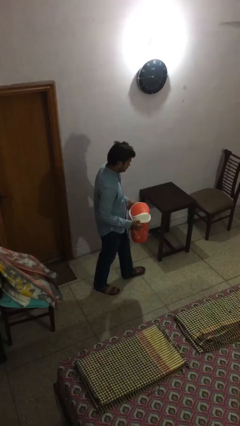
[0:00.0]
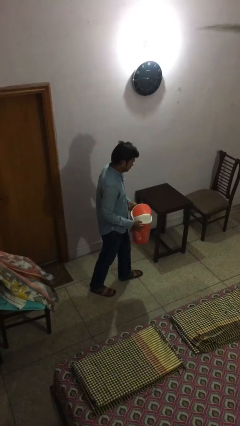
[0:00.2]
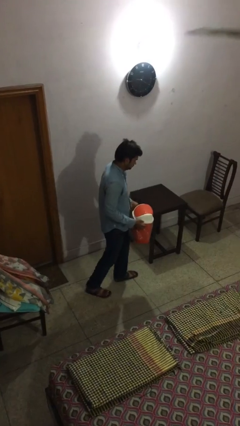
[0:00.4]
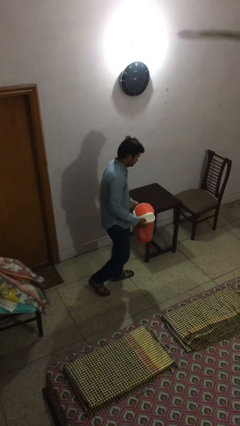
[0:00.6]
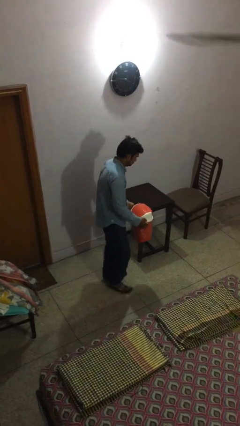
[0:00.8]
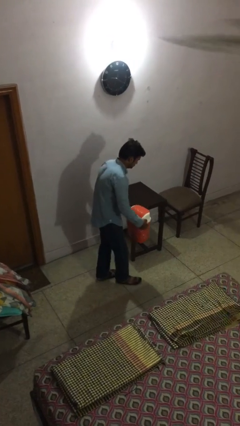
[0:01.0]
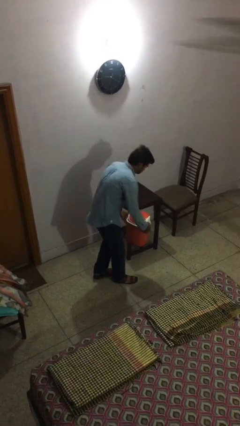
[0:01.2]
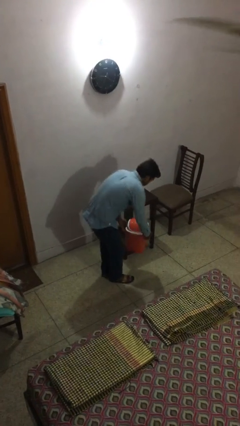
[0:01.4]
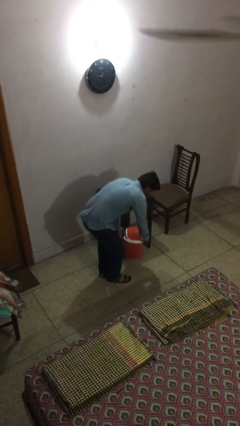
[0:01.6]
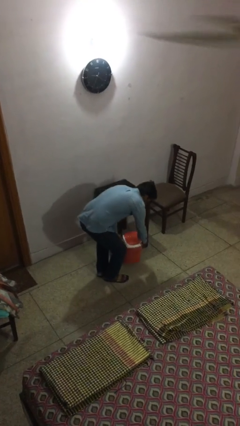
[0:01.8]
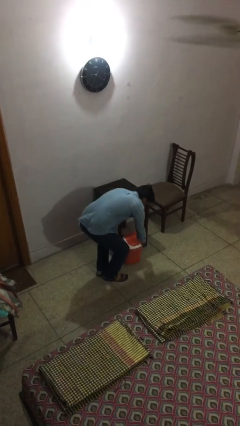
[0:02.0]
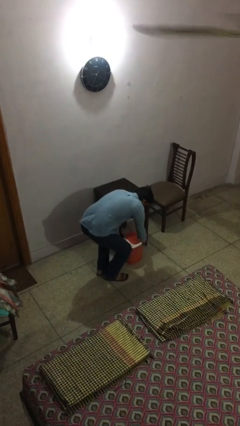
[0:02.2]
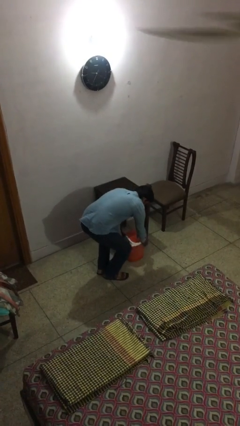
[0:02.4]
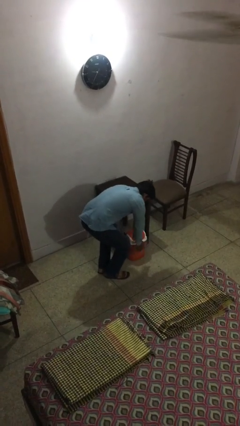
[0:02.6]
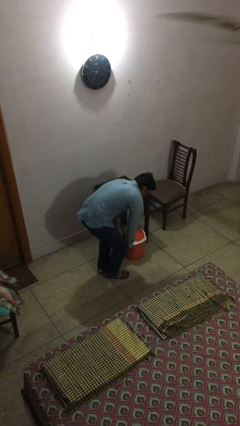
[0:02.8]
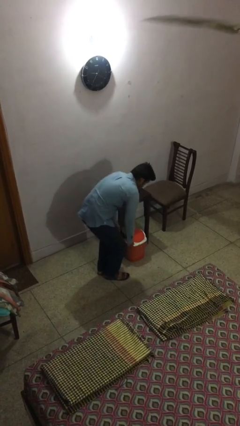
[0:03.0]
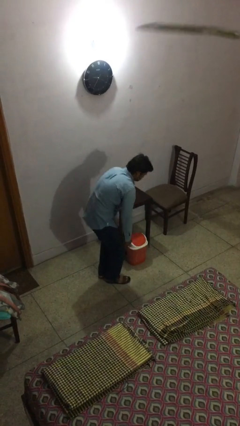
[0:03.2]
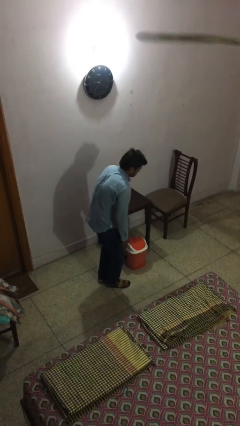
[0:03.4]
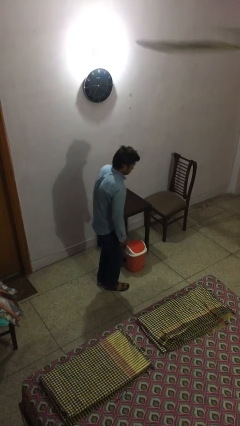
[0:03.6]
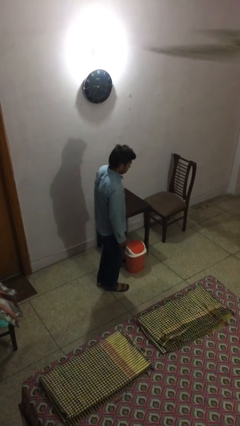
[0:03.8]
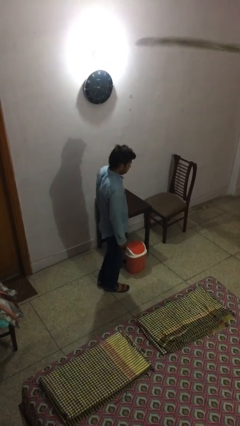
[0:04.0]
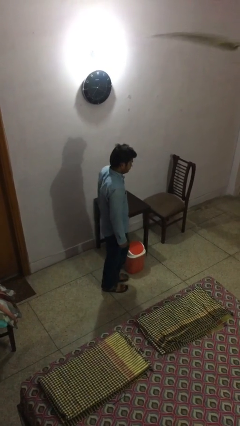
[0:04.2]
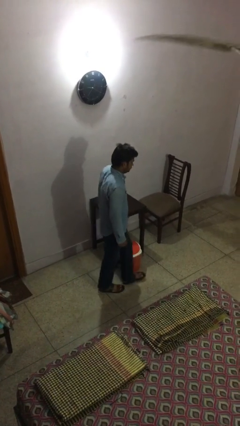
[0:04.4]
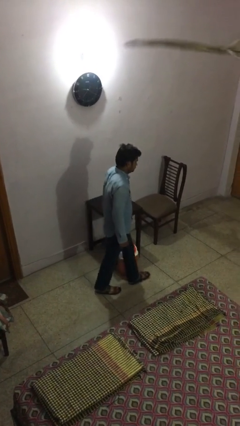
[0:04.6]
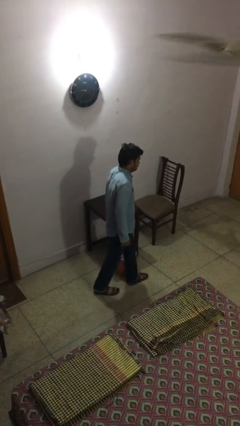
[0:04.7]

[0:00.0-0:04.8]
person puts down object on floor

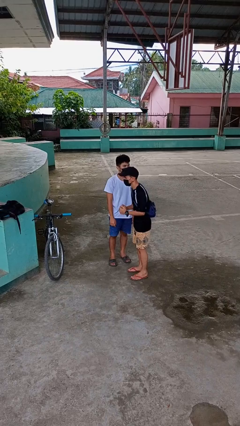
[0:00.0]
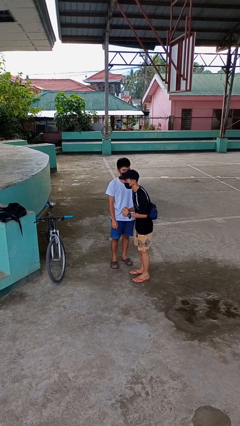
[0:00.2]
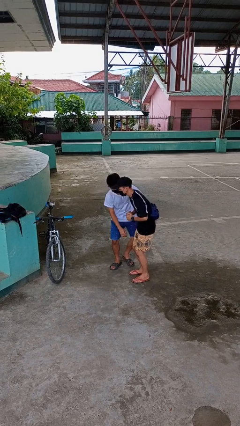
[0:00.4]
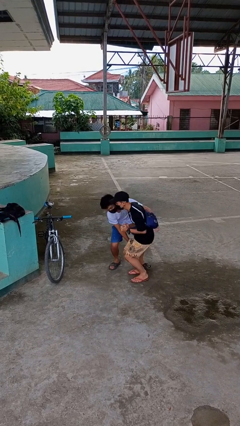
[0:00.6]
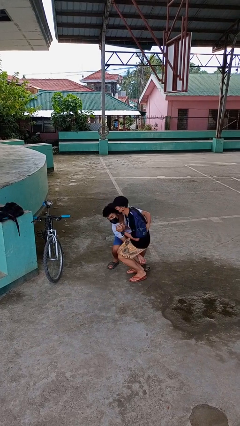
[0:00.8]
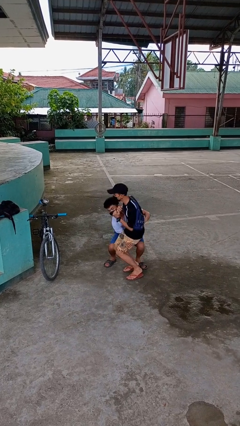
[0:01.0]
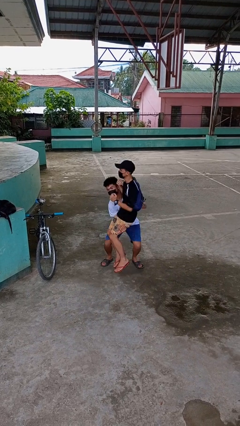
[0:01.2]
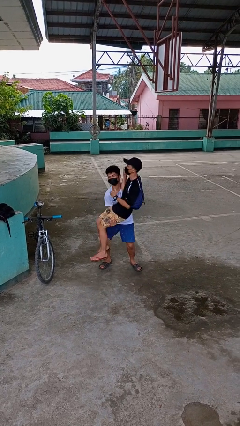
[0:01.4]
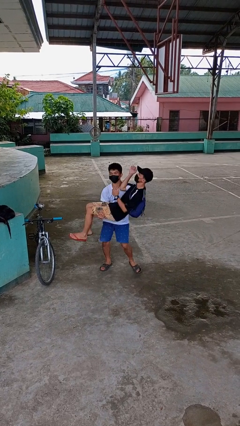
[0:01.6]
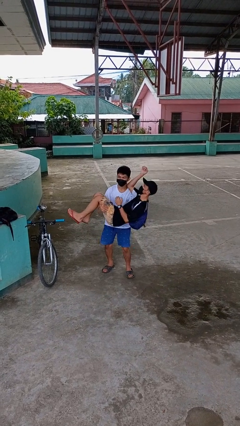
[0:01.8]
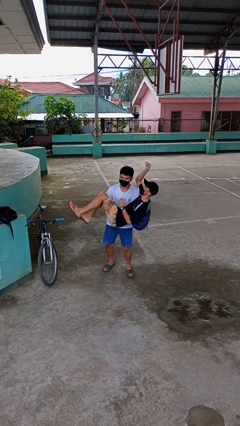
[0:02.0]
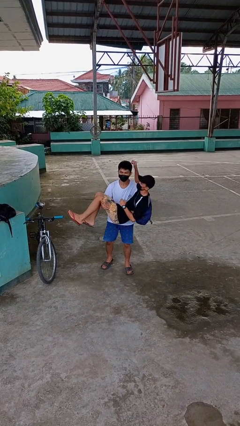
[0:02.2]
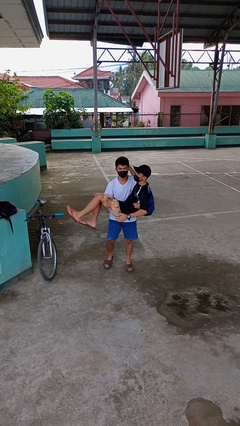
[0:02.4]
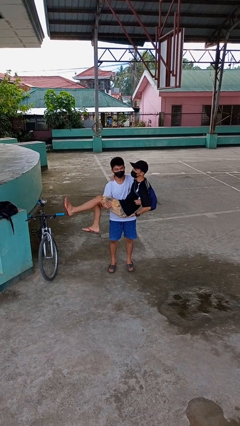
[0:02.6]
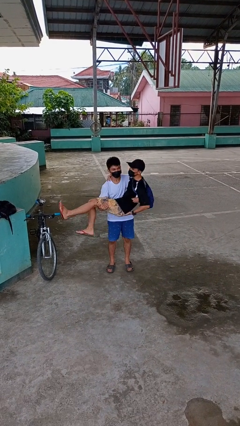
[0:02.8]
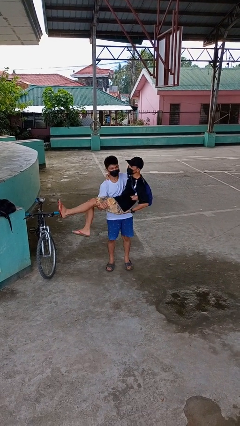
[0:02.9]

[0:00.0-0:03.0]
person picks up person

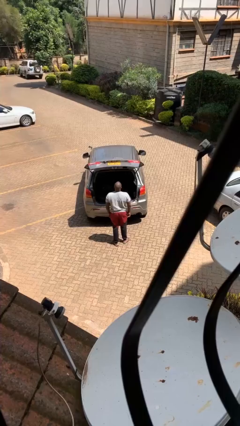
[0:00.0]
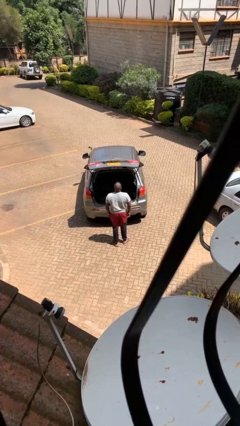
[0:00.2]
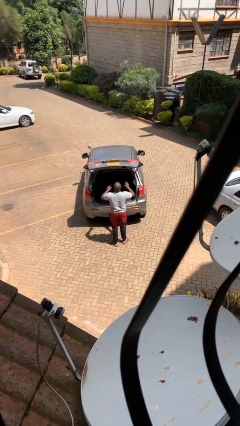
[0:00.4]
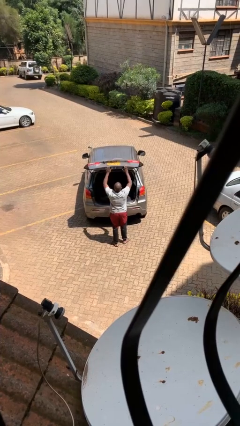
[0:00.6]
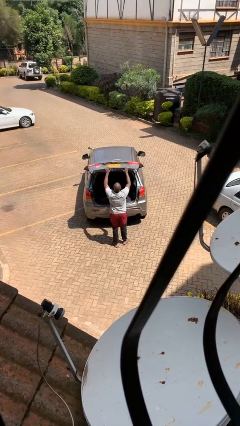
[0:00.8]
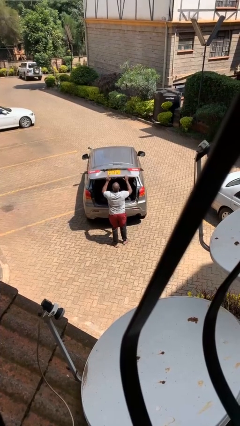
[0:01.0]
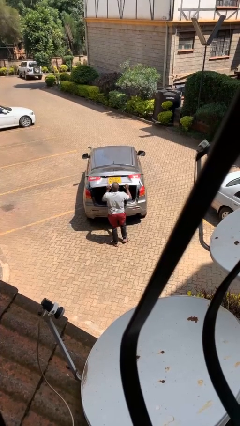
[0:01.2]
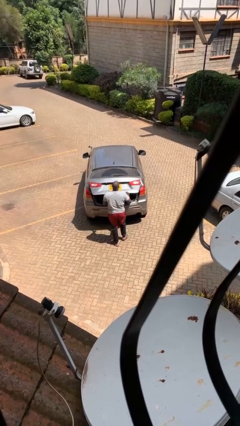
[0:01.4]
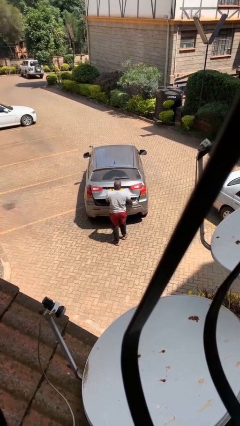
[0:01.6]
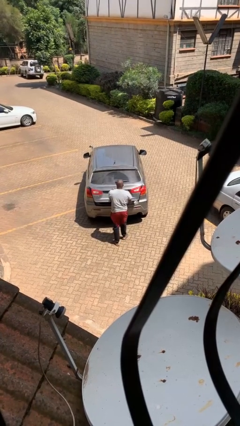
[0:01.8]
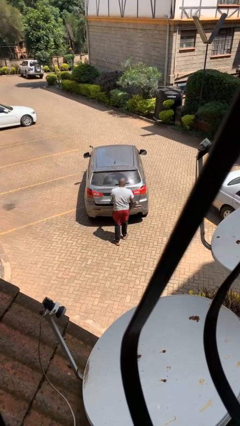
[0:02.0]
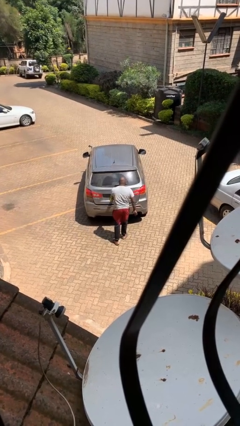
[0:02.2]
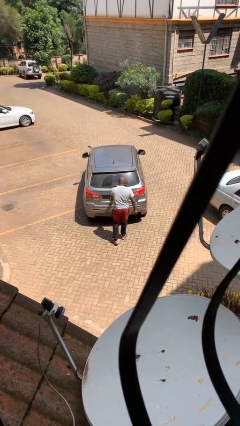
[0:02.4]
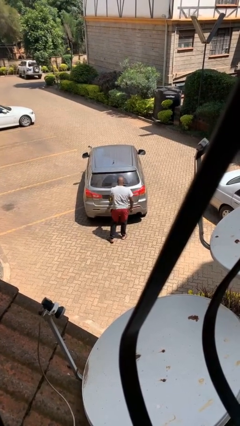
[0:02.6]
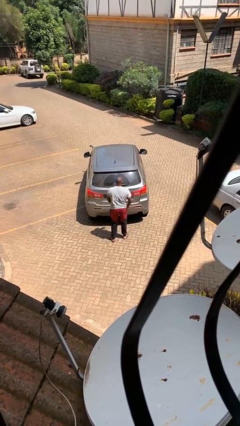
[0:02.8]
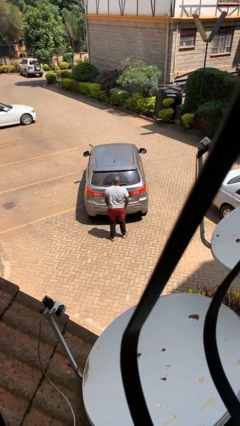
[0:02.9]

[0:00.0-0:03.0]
person closes car trunk

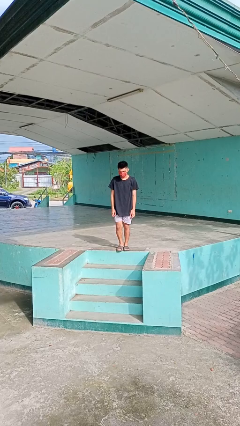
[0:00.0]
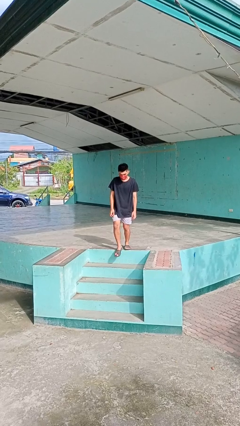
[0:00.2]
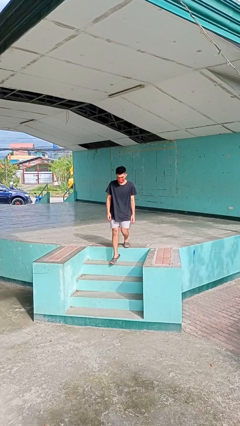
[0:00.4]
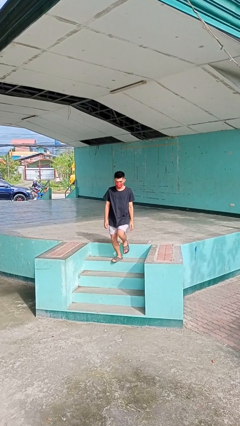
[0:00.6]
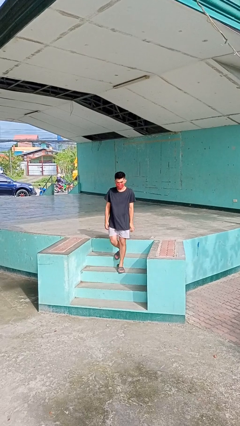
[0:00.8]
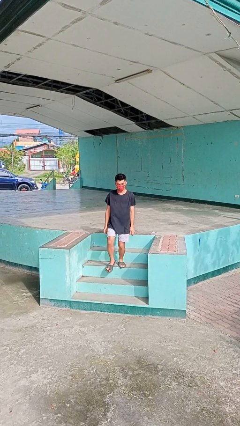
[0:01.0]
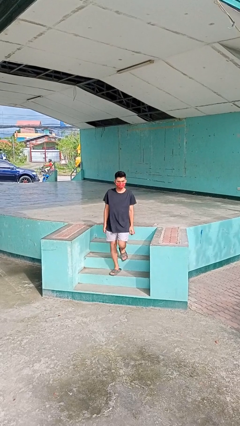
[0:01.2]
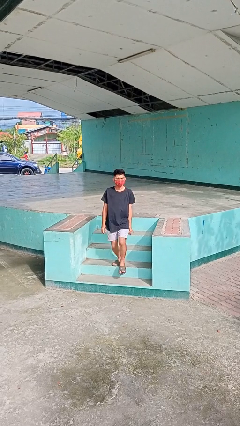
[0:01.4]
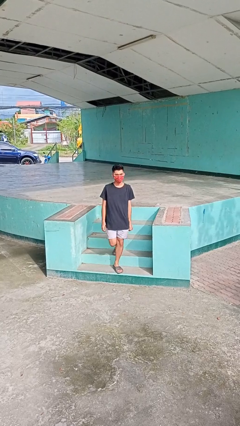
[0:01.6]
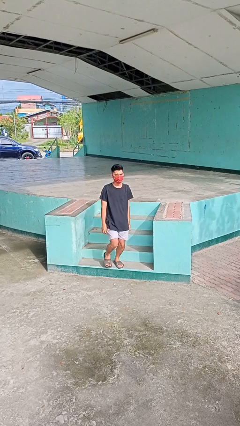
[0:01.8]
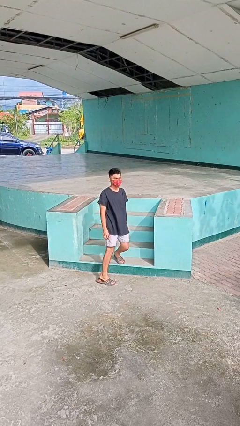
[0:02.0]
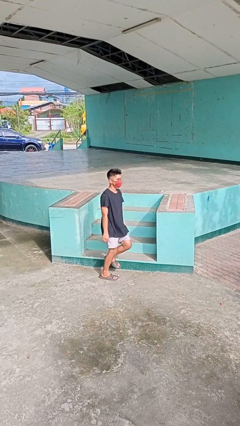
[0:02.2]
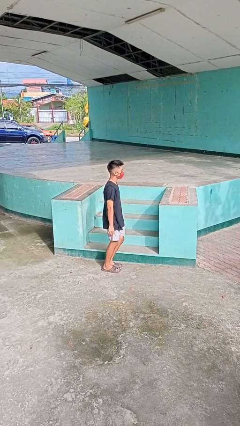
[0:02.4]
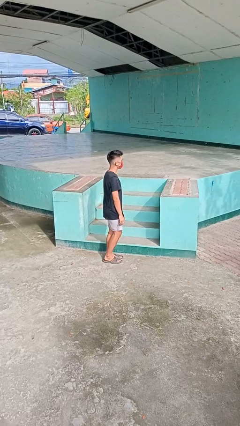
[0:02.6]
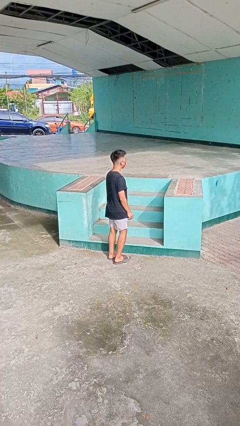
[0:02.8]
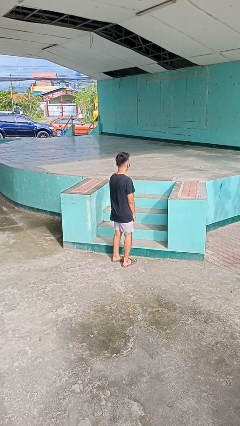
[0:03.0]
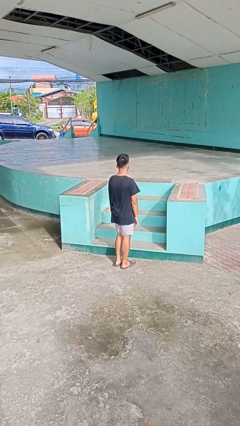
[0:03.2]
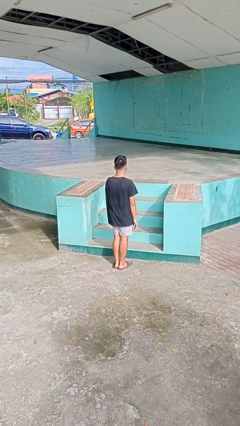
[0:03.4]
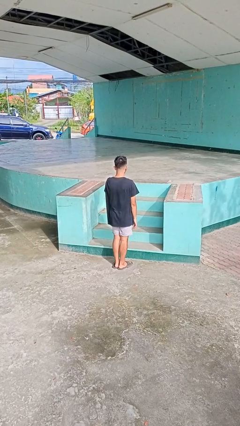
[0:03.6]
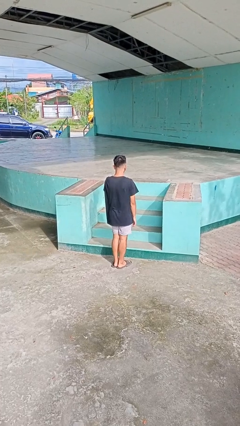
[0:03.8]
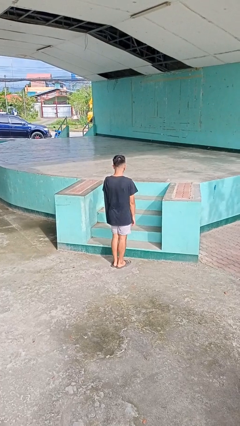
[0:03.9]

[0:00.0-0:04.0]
person climbs down stairs

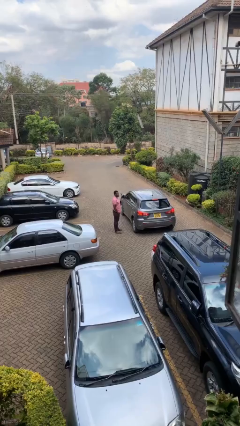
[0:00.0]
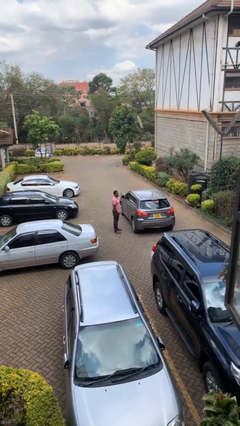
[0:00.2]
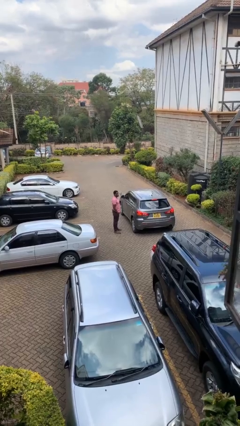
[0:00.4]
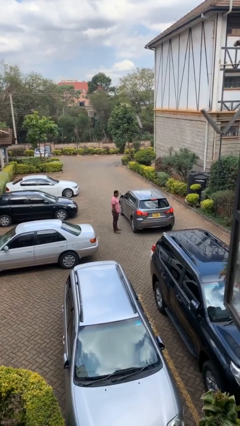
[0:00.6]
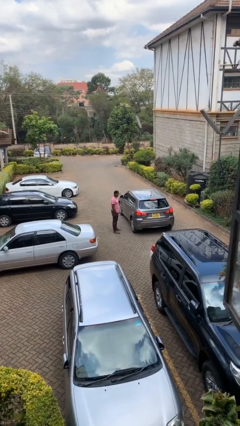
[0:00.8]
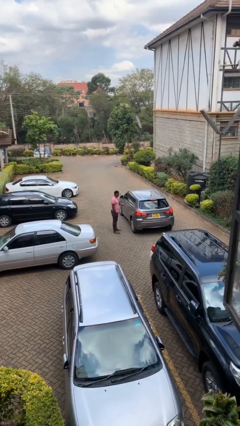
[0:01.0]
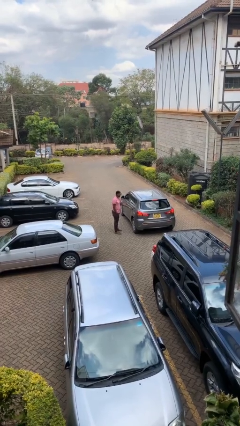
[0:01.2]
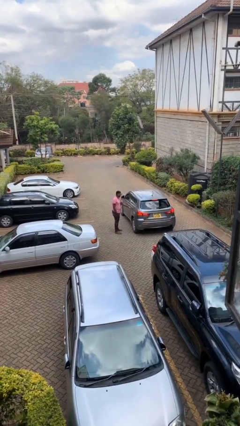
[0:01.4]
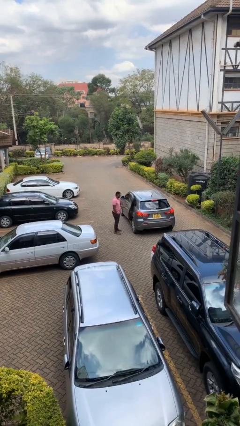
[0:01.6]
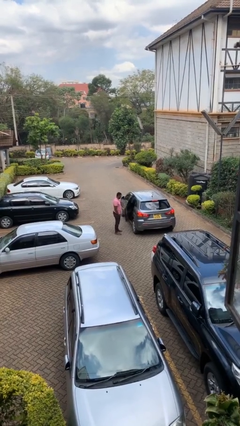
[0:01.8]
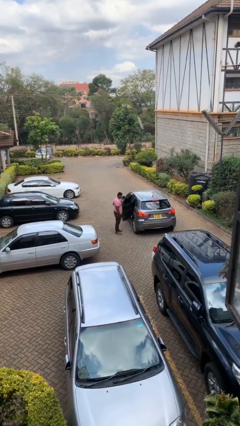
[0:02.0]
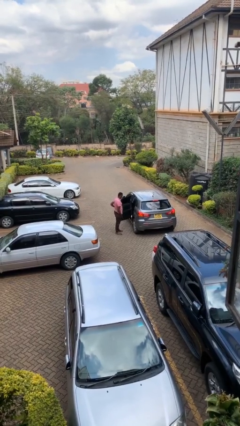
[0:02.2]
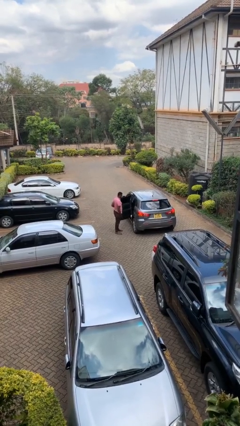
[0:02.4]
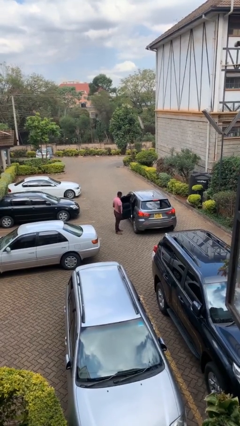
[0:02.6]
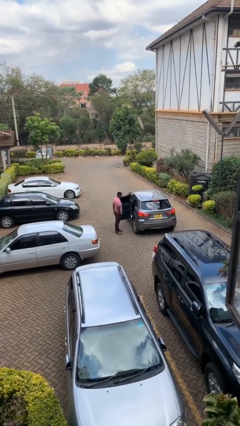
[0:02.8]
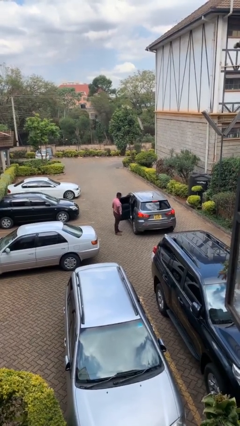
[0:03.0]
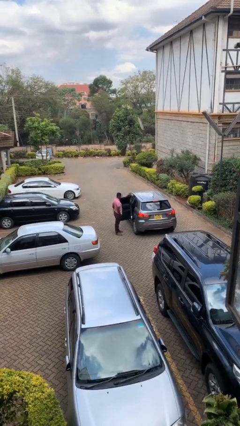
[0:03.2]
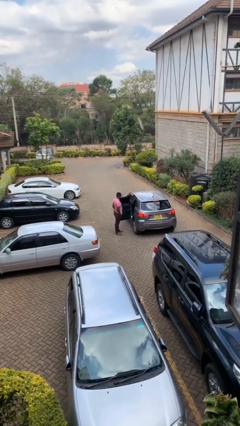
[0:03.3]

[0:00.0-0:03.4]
person opens car door
